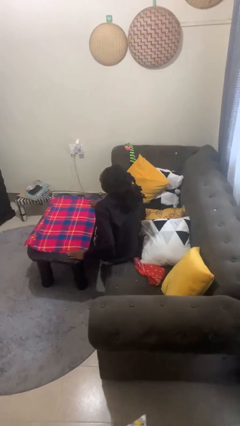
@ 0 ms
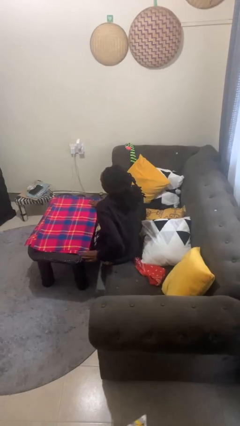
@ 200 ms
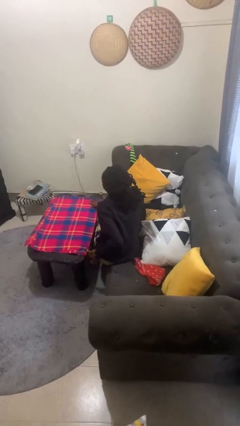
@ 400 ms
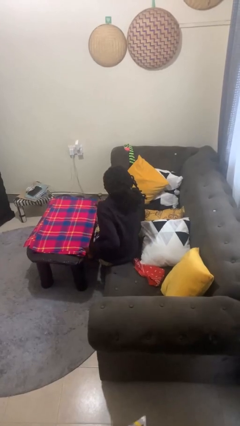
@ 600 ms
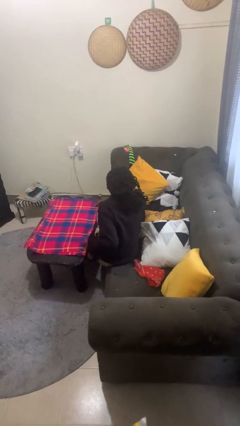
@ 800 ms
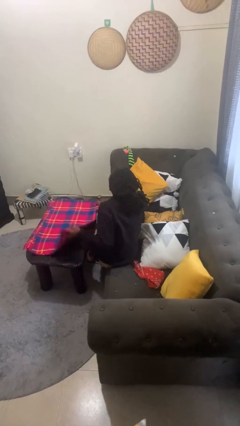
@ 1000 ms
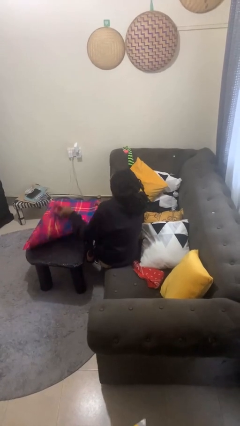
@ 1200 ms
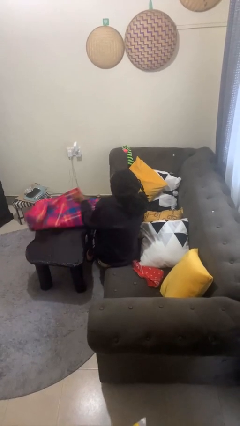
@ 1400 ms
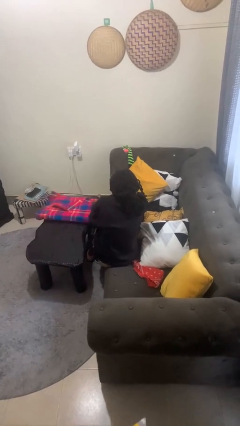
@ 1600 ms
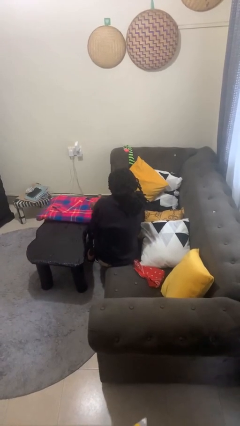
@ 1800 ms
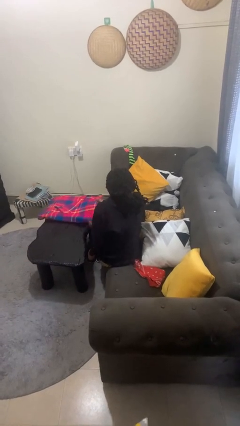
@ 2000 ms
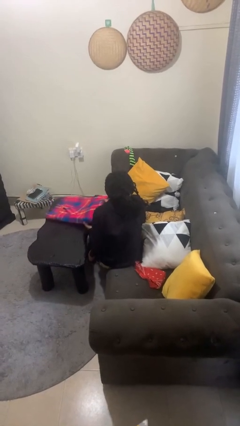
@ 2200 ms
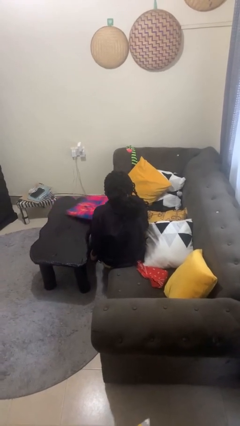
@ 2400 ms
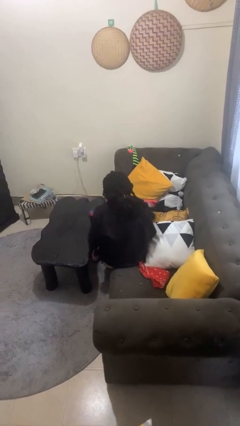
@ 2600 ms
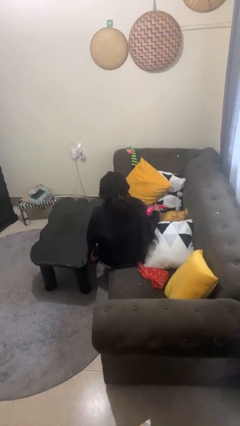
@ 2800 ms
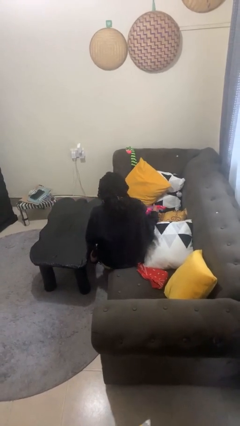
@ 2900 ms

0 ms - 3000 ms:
person folds tablecloth

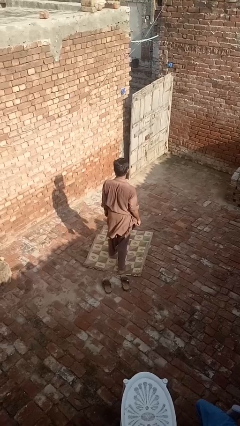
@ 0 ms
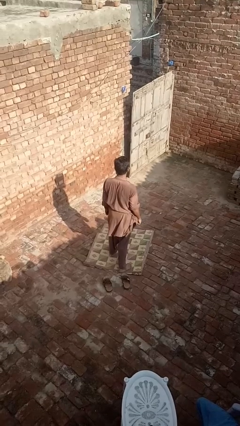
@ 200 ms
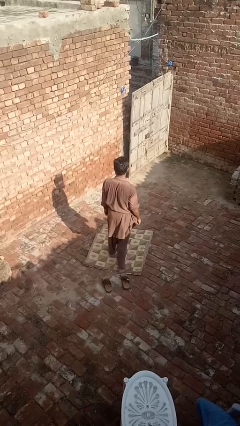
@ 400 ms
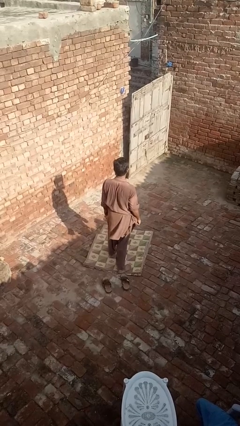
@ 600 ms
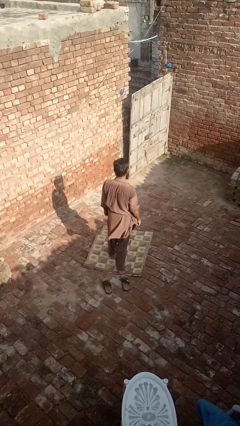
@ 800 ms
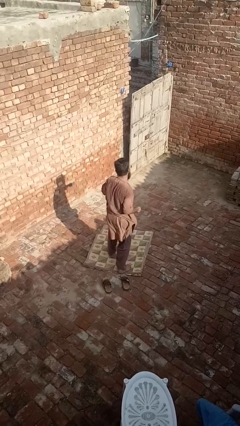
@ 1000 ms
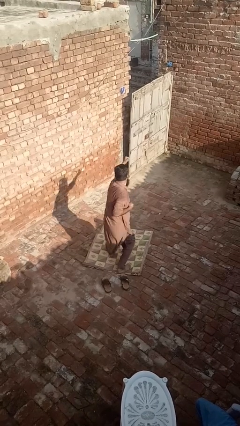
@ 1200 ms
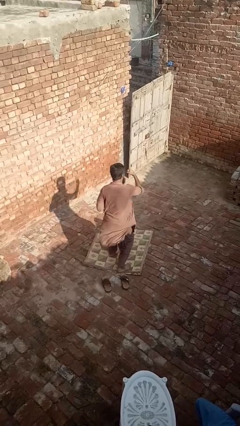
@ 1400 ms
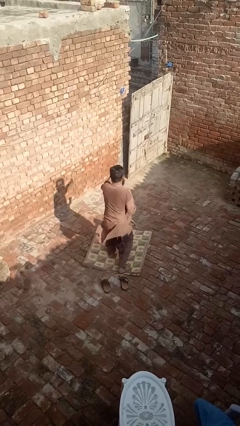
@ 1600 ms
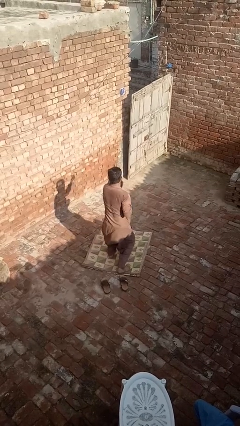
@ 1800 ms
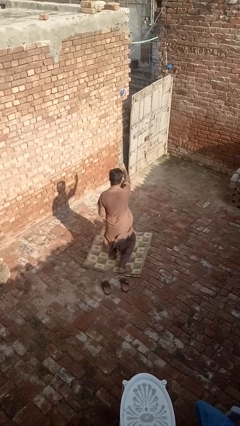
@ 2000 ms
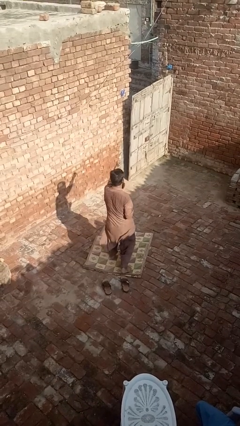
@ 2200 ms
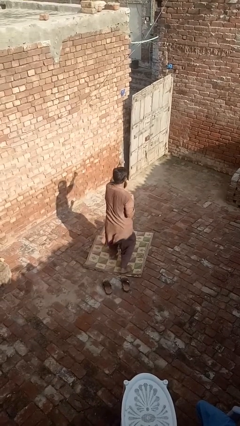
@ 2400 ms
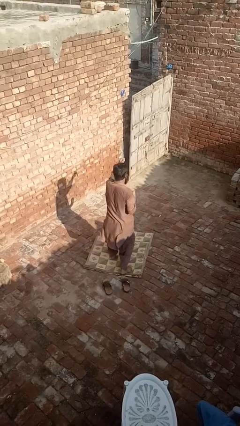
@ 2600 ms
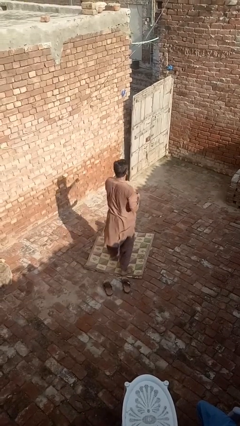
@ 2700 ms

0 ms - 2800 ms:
person punches

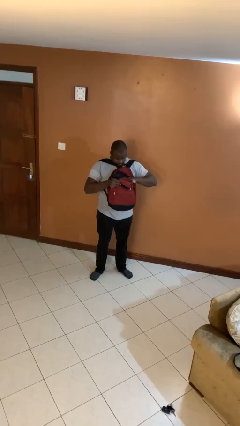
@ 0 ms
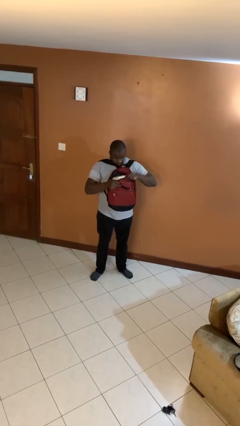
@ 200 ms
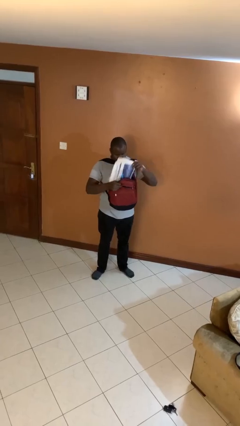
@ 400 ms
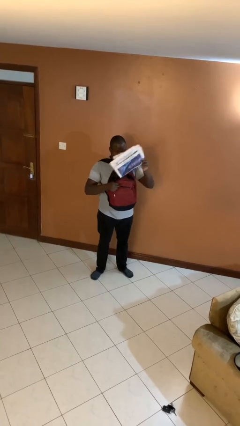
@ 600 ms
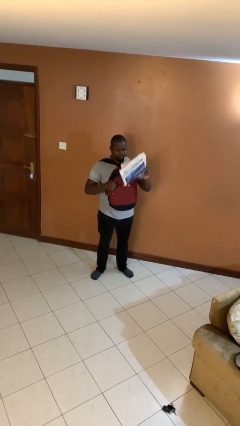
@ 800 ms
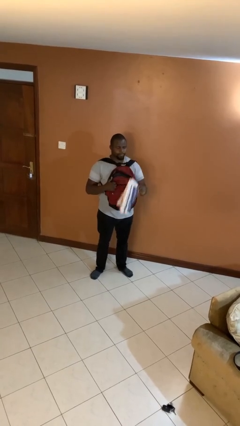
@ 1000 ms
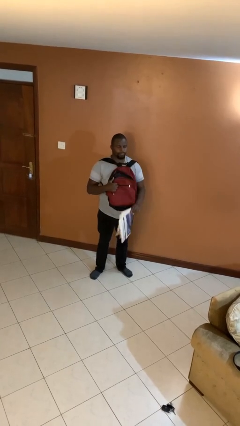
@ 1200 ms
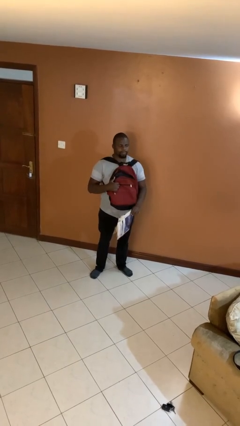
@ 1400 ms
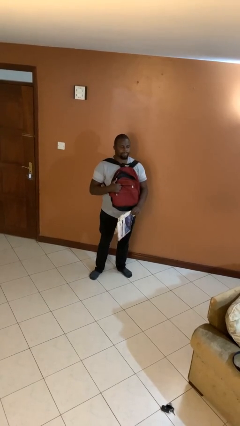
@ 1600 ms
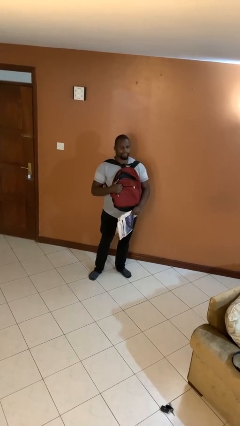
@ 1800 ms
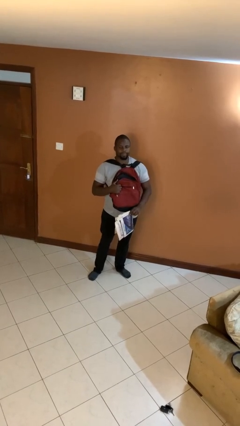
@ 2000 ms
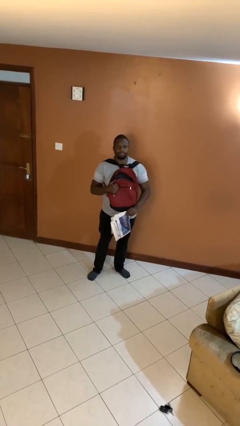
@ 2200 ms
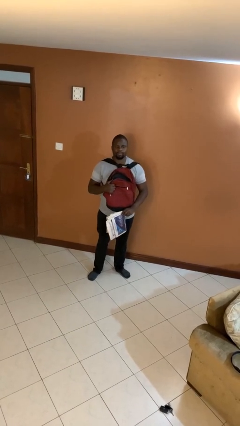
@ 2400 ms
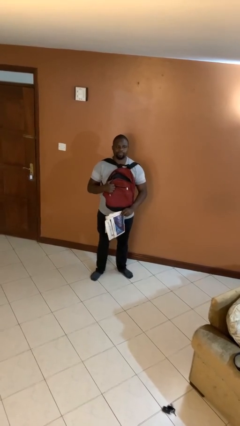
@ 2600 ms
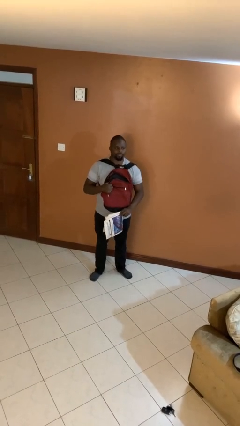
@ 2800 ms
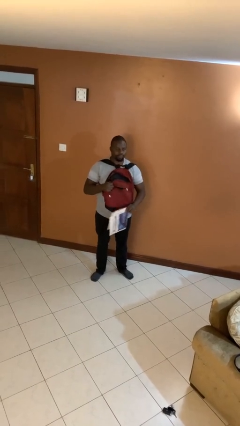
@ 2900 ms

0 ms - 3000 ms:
person takes object from backpack

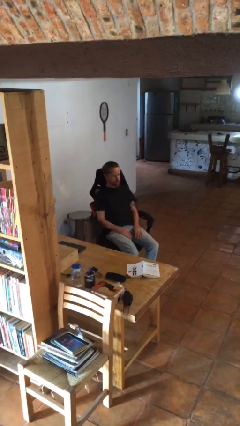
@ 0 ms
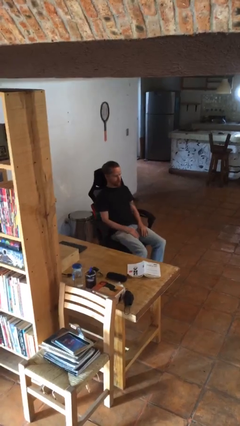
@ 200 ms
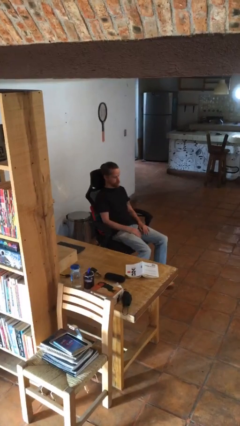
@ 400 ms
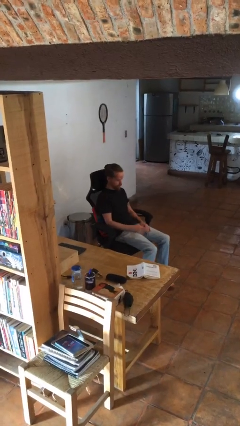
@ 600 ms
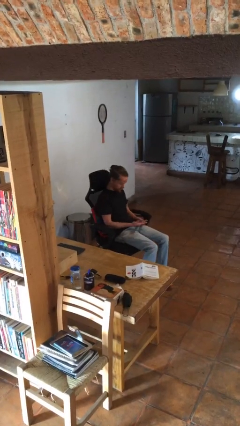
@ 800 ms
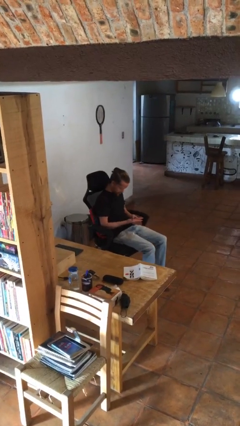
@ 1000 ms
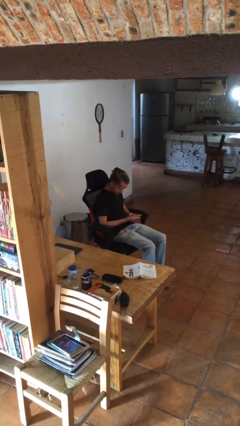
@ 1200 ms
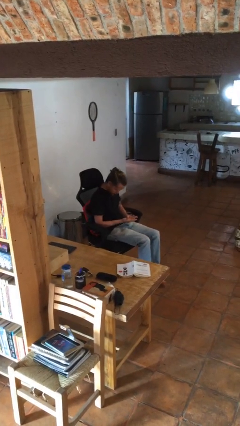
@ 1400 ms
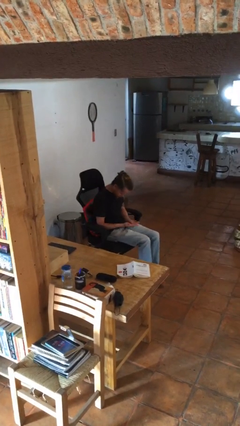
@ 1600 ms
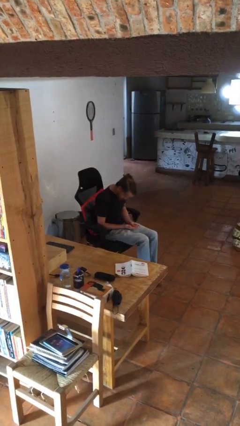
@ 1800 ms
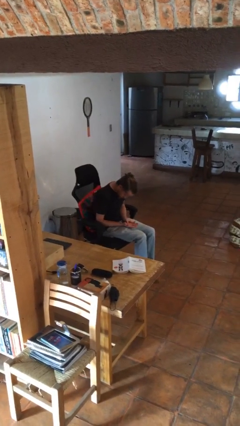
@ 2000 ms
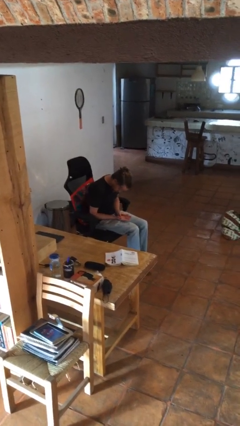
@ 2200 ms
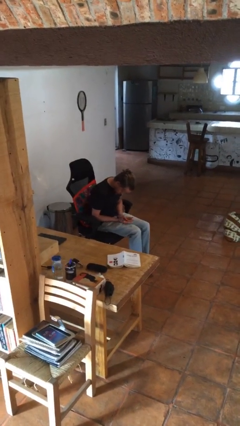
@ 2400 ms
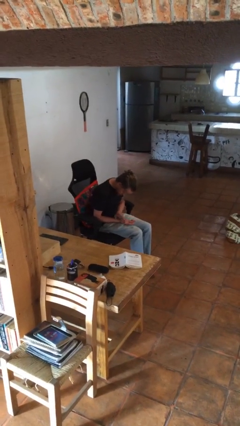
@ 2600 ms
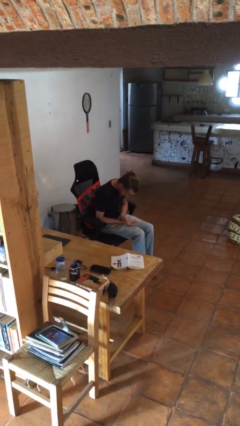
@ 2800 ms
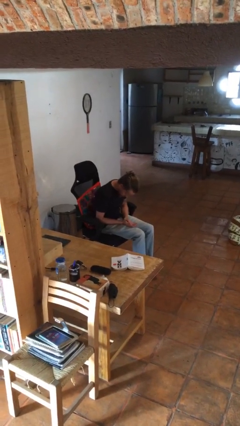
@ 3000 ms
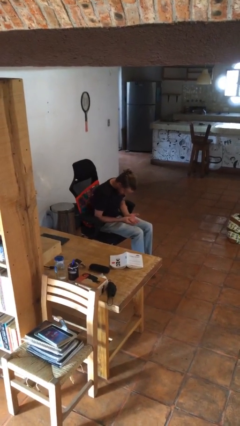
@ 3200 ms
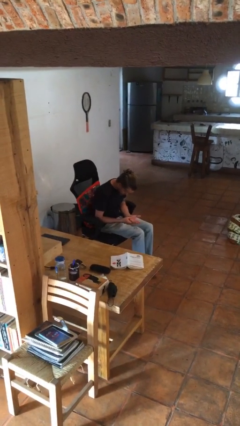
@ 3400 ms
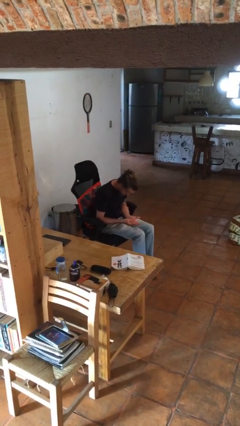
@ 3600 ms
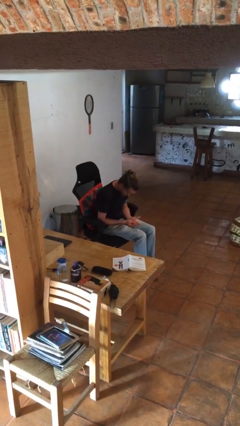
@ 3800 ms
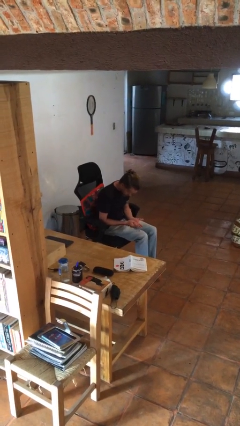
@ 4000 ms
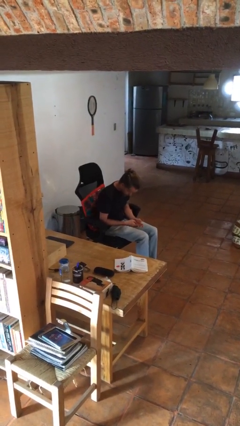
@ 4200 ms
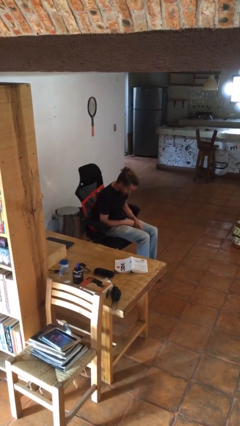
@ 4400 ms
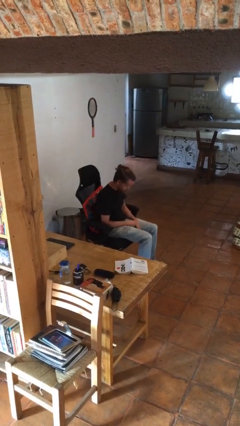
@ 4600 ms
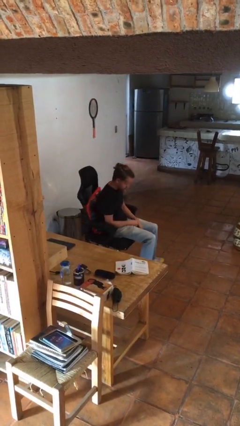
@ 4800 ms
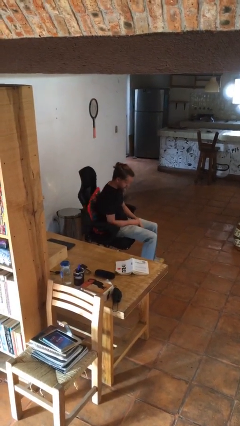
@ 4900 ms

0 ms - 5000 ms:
person looks at hands in lap

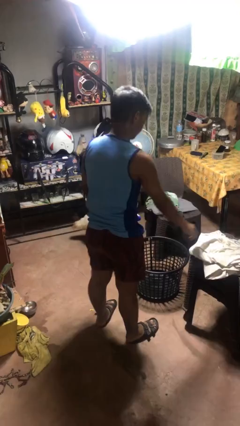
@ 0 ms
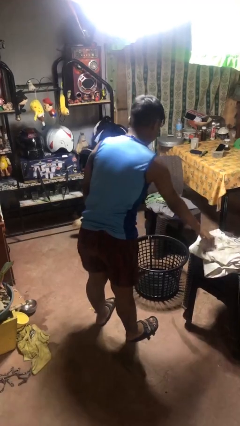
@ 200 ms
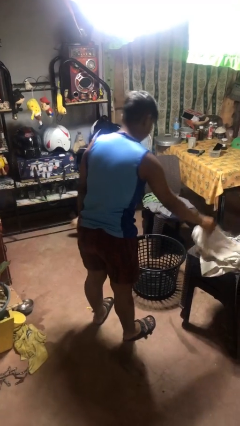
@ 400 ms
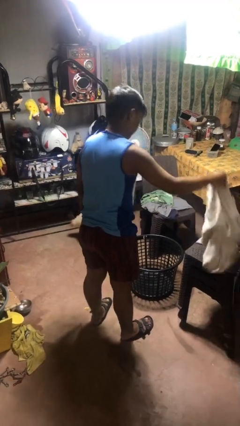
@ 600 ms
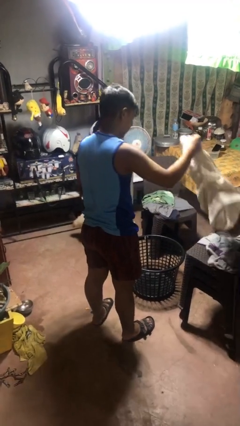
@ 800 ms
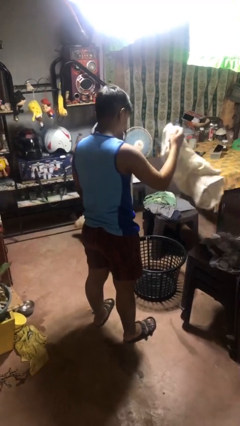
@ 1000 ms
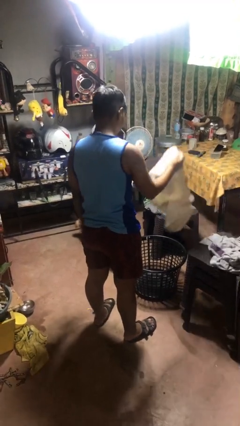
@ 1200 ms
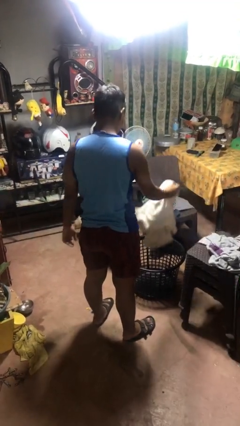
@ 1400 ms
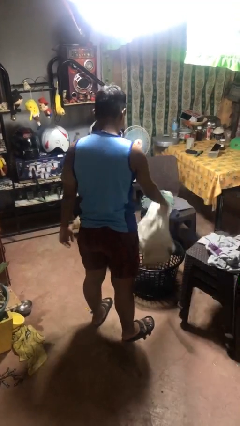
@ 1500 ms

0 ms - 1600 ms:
person puts object into basket

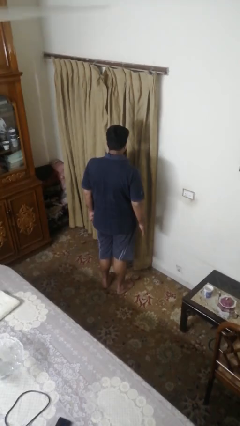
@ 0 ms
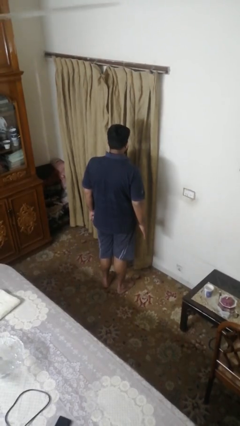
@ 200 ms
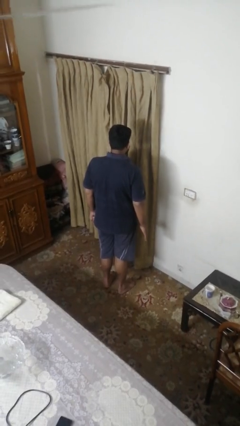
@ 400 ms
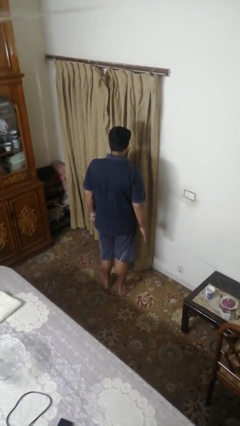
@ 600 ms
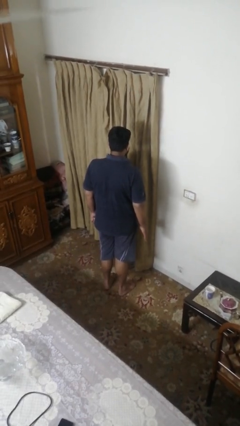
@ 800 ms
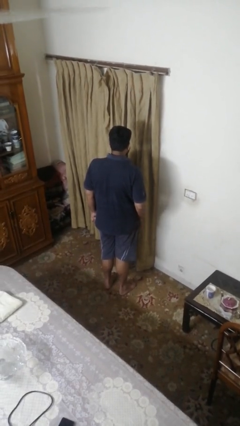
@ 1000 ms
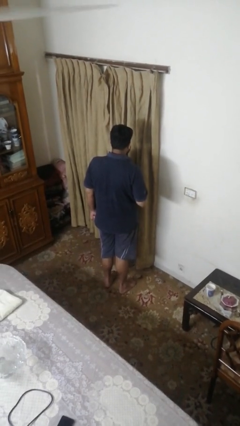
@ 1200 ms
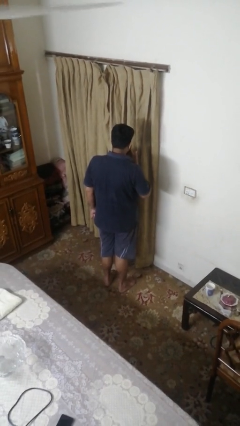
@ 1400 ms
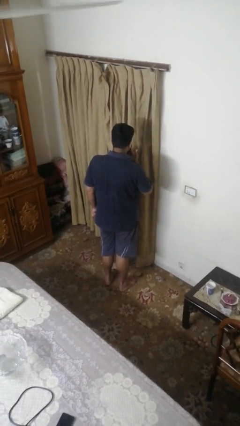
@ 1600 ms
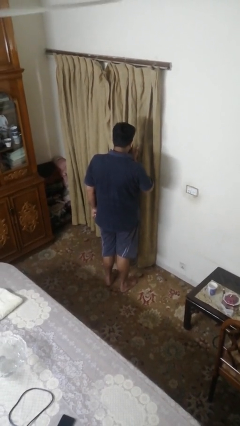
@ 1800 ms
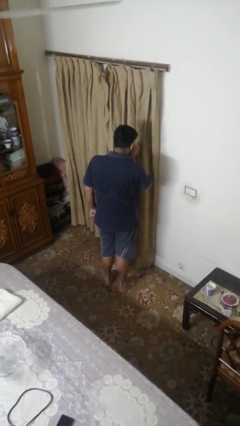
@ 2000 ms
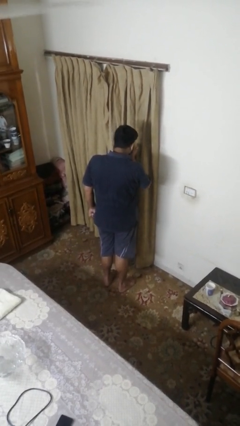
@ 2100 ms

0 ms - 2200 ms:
person gestures blow kiss
